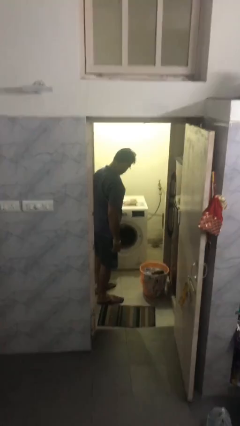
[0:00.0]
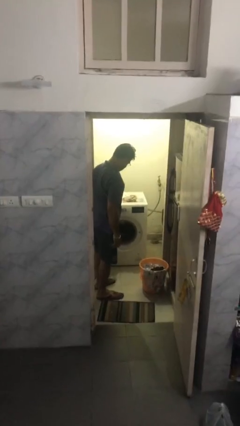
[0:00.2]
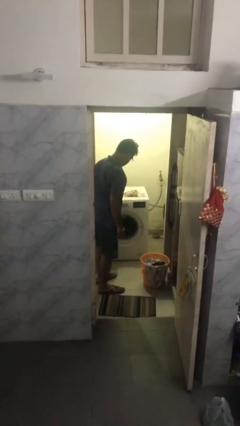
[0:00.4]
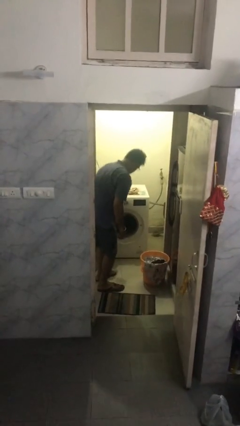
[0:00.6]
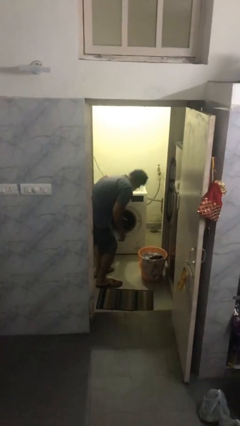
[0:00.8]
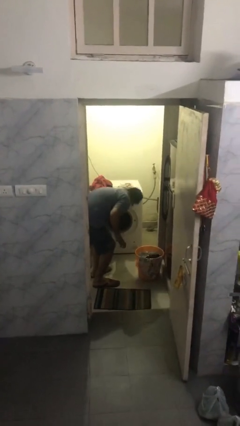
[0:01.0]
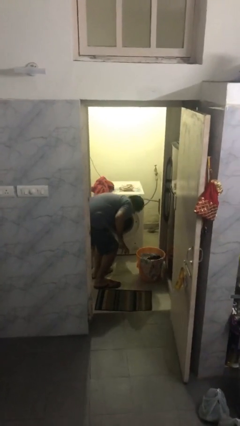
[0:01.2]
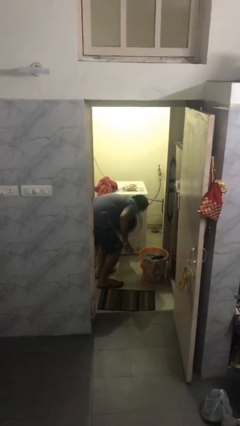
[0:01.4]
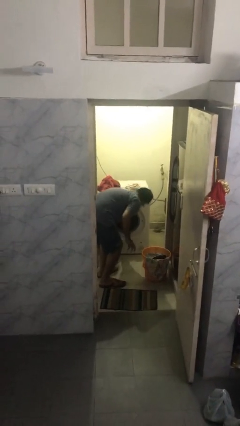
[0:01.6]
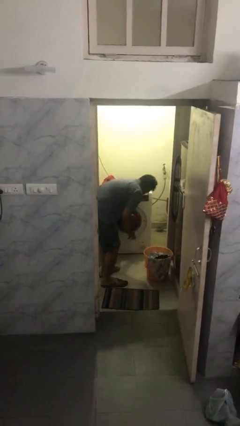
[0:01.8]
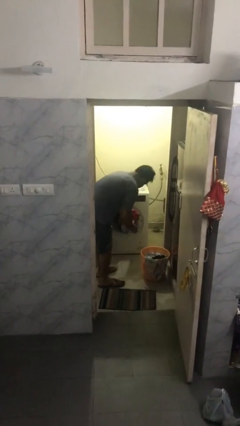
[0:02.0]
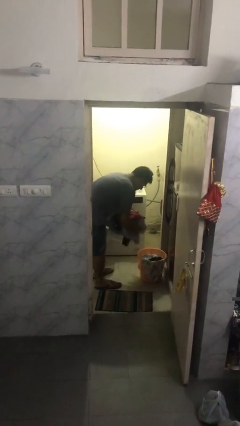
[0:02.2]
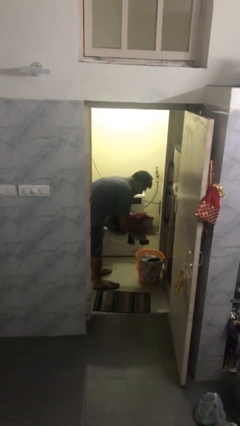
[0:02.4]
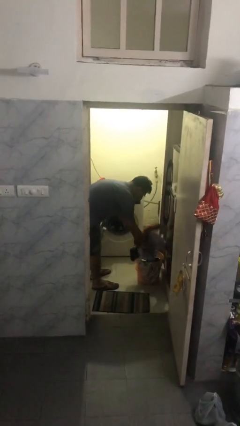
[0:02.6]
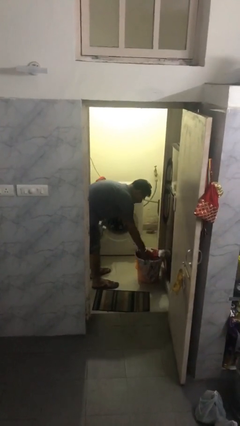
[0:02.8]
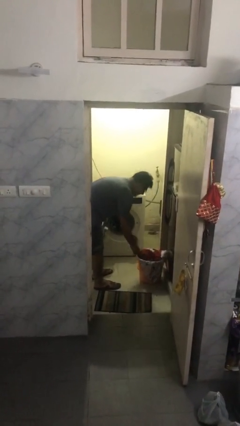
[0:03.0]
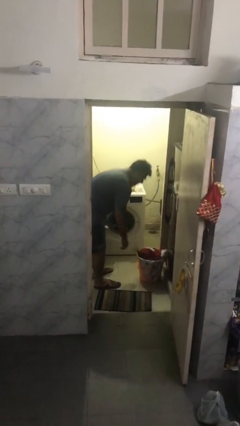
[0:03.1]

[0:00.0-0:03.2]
person unloads clotheswasher

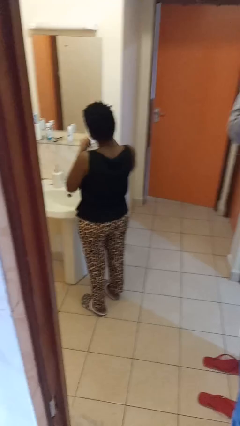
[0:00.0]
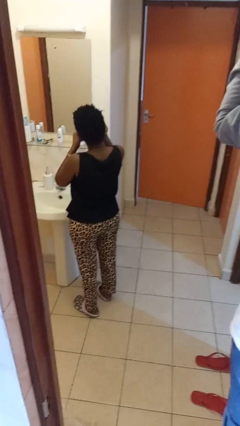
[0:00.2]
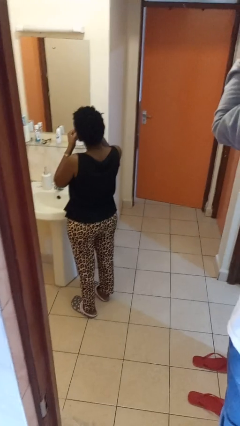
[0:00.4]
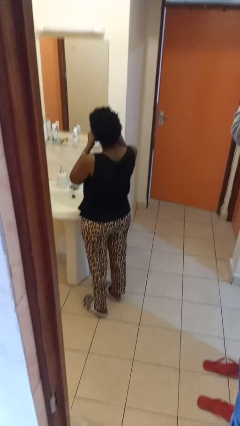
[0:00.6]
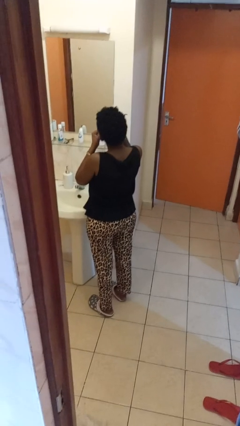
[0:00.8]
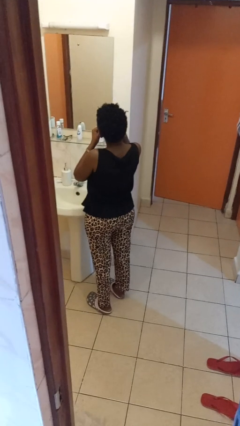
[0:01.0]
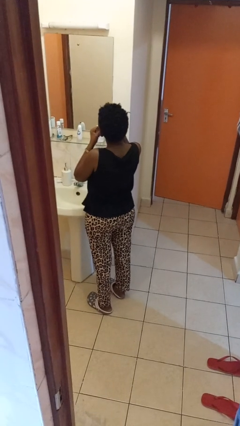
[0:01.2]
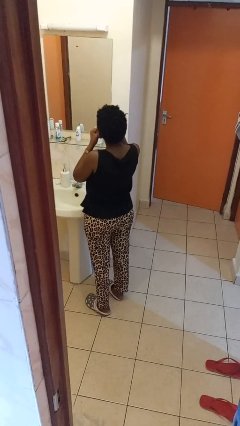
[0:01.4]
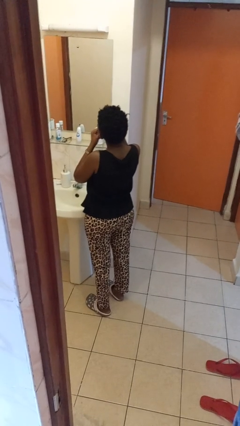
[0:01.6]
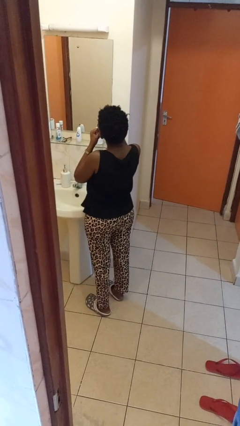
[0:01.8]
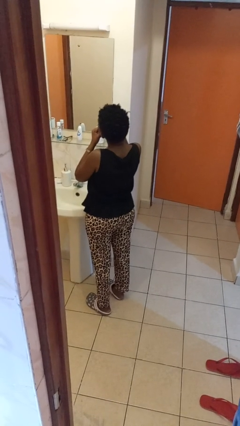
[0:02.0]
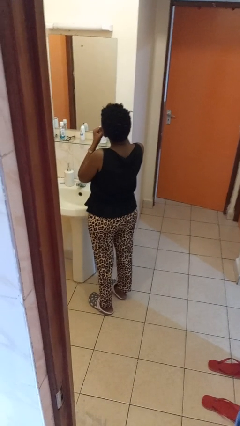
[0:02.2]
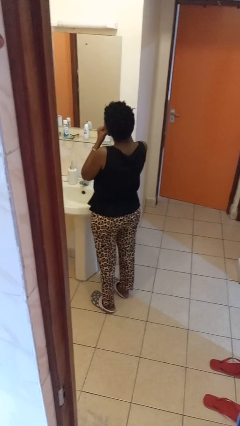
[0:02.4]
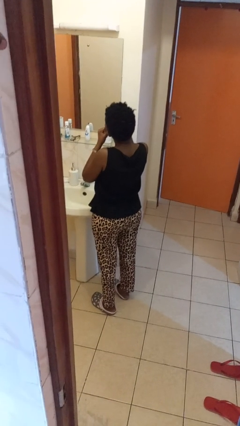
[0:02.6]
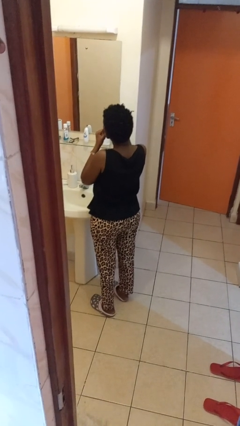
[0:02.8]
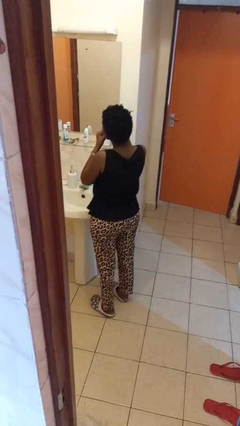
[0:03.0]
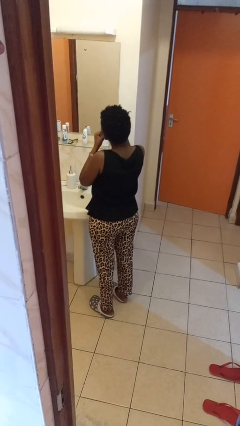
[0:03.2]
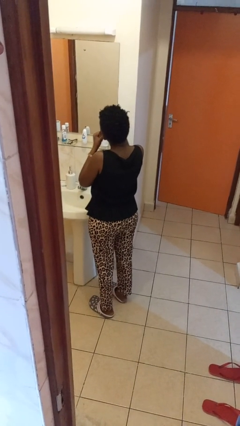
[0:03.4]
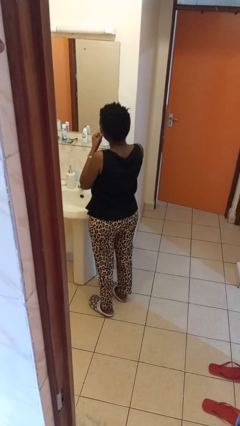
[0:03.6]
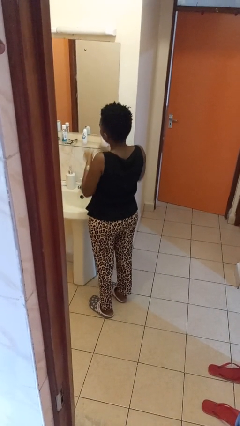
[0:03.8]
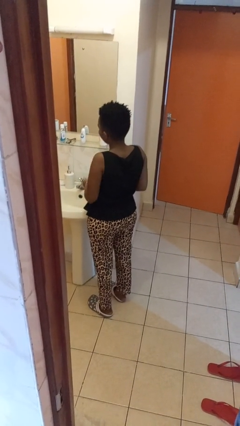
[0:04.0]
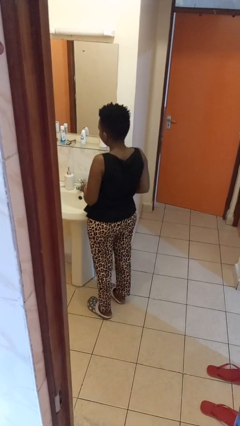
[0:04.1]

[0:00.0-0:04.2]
person flosses

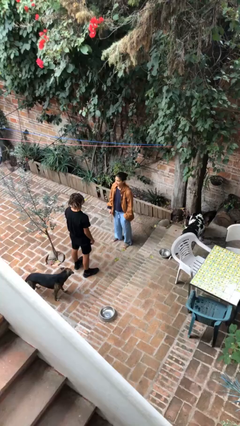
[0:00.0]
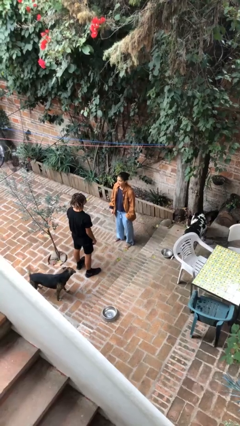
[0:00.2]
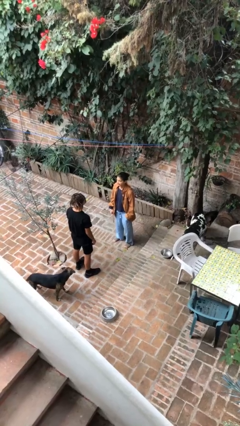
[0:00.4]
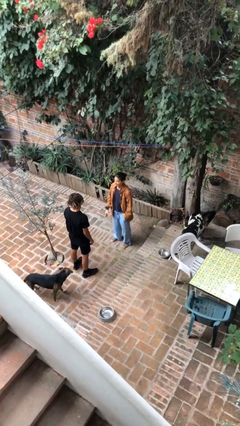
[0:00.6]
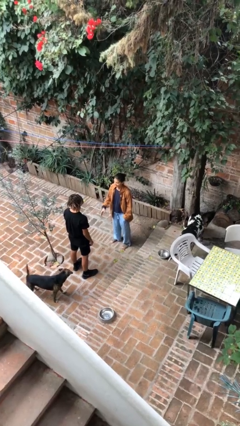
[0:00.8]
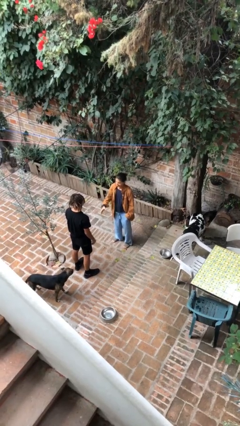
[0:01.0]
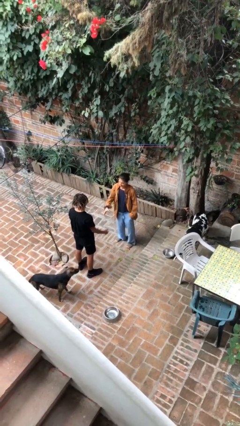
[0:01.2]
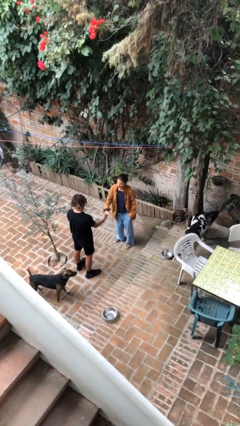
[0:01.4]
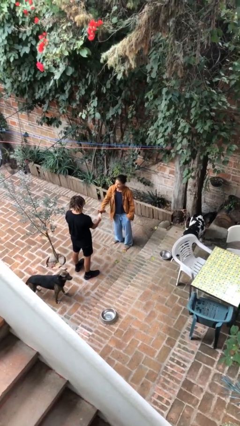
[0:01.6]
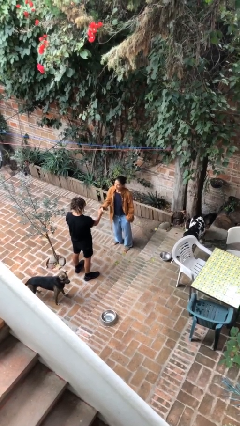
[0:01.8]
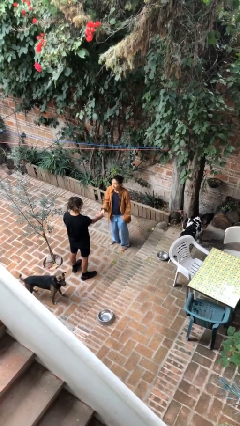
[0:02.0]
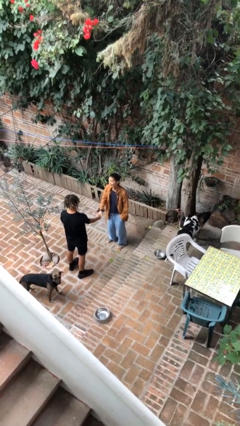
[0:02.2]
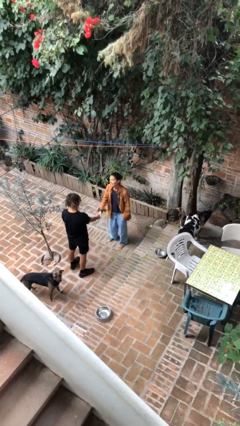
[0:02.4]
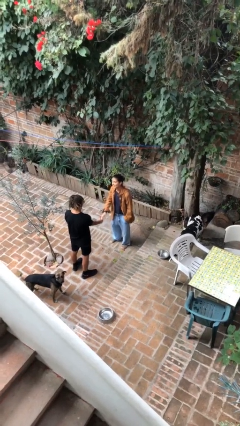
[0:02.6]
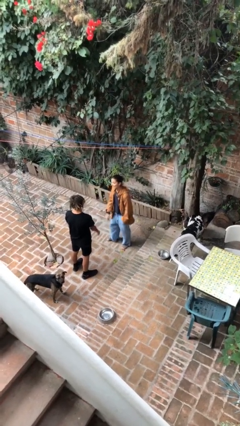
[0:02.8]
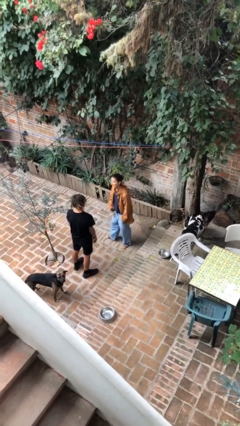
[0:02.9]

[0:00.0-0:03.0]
person shakes hand

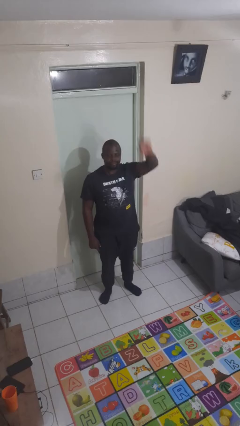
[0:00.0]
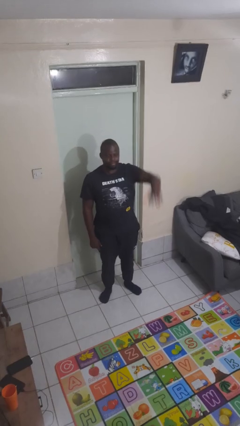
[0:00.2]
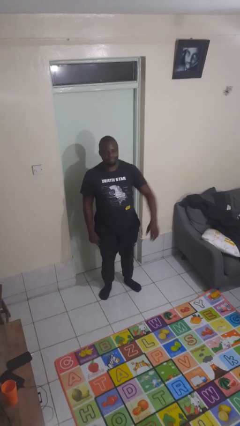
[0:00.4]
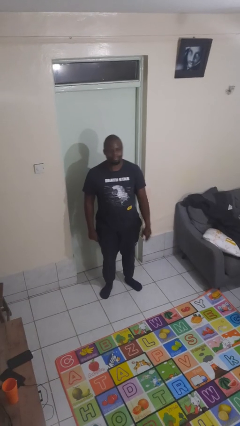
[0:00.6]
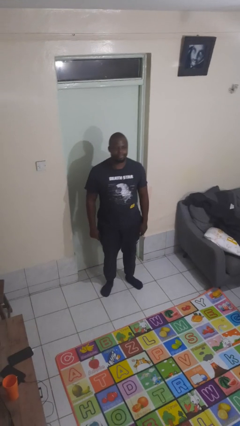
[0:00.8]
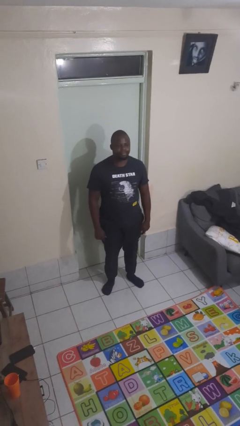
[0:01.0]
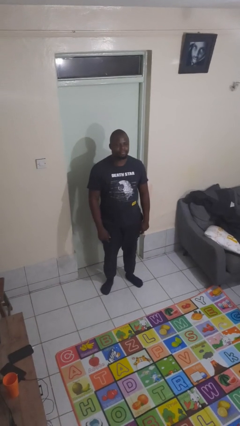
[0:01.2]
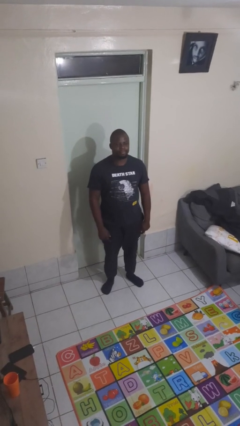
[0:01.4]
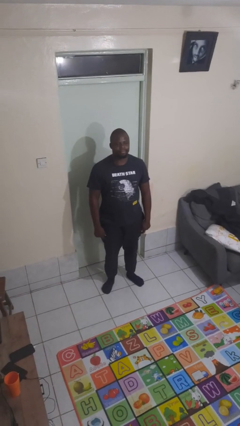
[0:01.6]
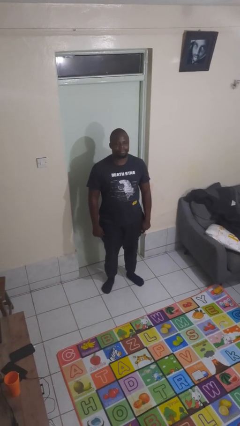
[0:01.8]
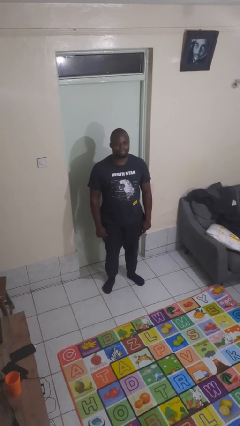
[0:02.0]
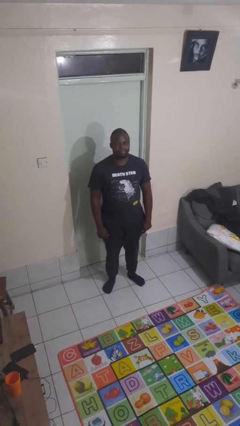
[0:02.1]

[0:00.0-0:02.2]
person gestures lower hand

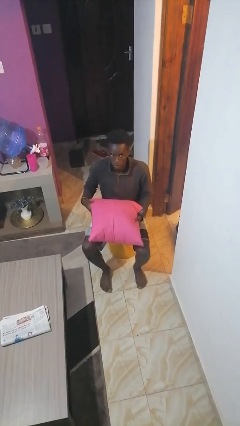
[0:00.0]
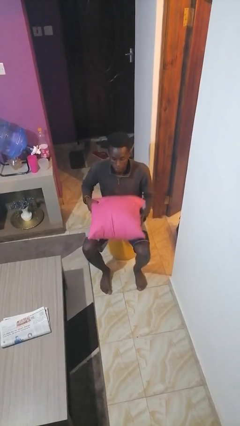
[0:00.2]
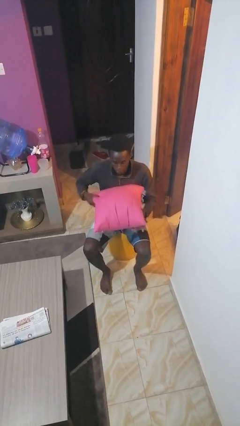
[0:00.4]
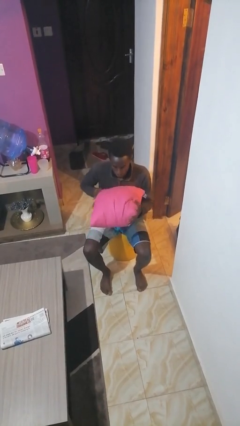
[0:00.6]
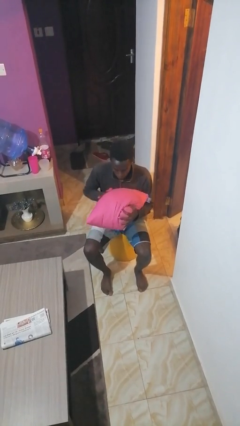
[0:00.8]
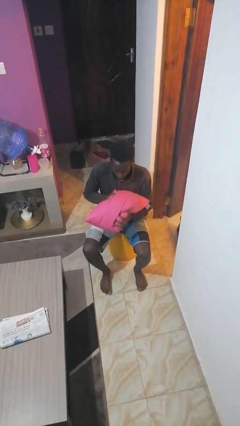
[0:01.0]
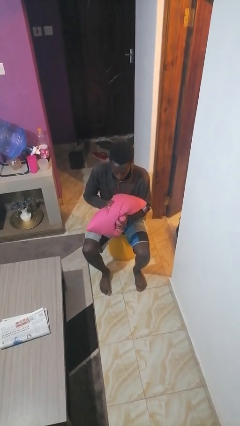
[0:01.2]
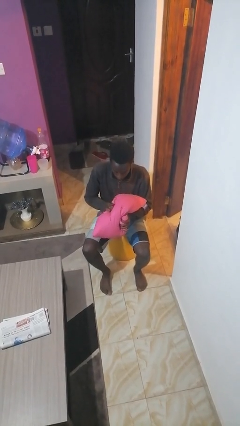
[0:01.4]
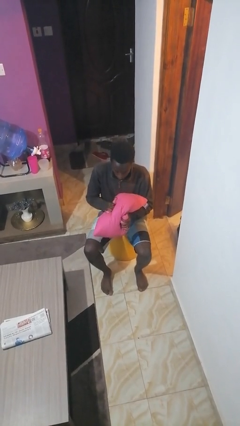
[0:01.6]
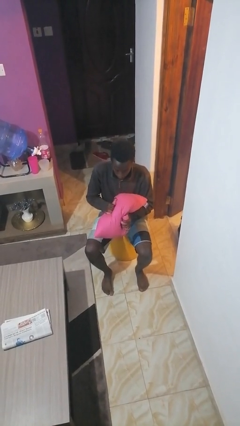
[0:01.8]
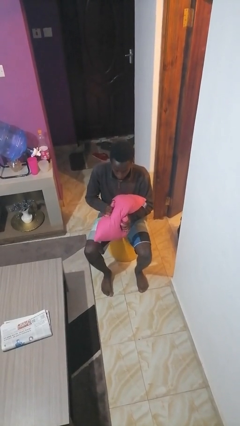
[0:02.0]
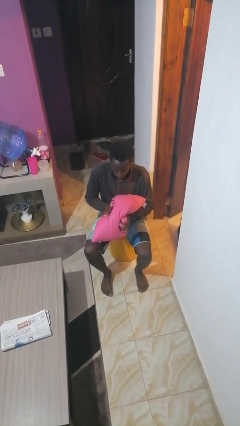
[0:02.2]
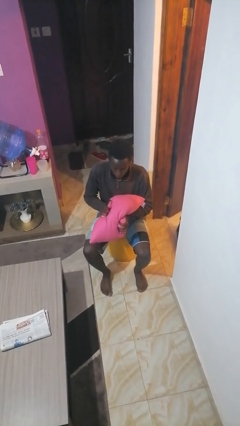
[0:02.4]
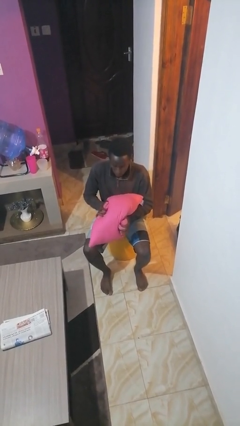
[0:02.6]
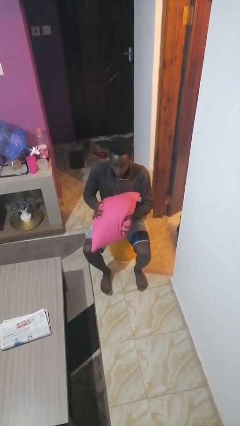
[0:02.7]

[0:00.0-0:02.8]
person squeezes object

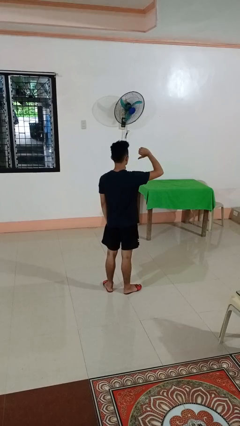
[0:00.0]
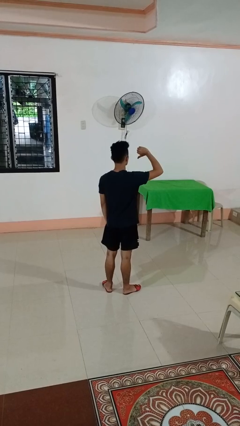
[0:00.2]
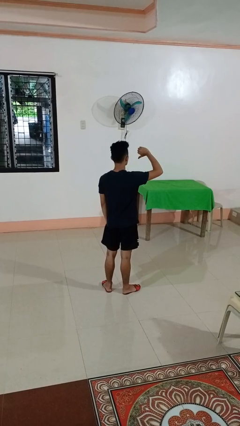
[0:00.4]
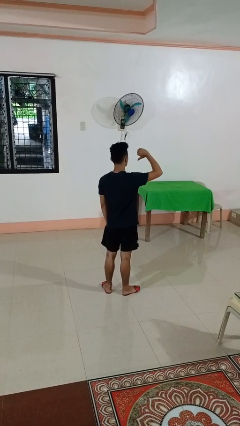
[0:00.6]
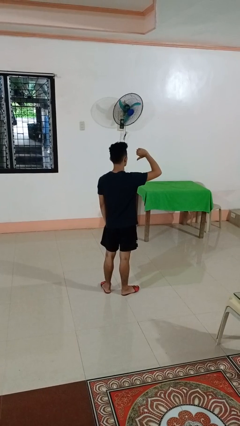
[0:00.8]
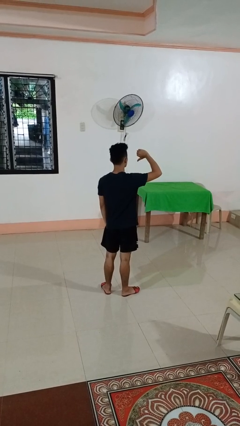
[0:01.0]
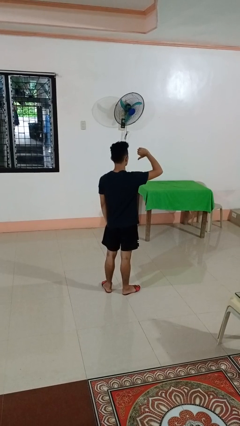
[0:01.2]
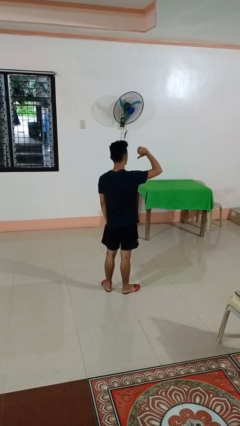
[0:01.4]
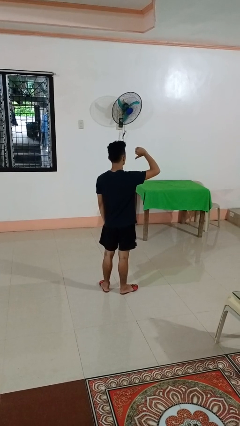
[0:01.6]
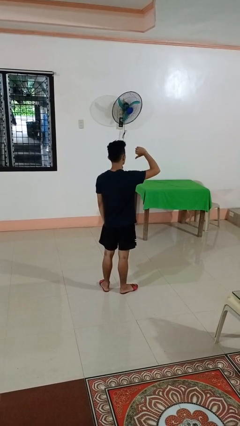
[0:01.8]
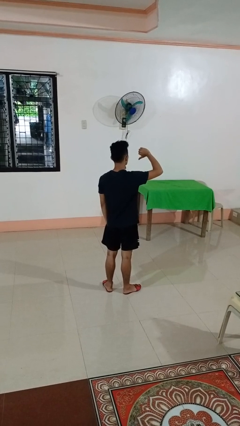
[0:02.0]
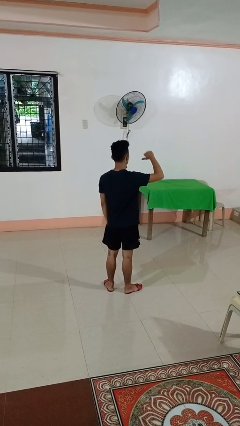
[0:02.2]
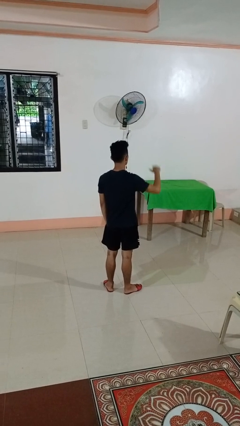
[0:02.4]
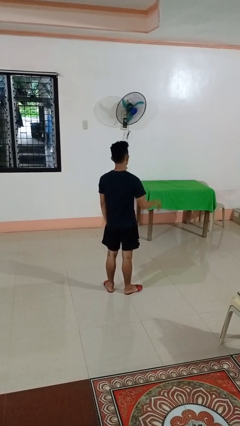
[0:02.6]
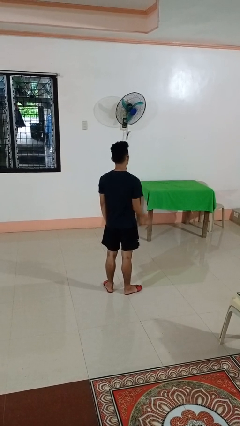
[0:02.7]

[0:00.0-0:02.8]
person gestures thumbs down
